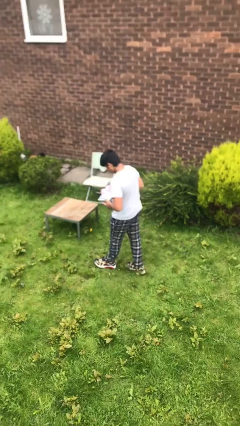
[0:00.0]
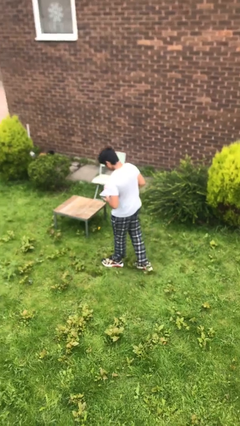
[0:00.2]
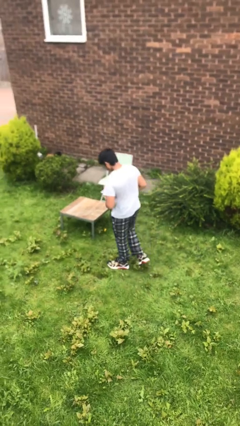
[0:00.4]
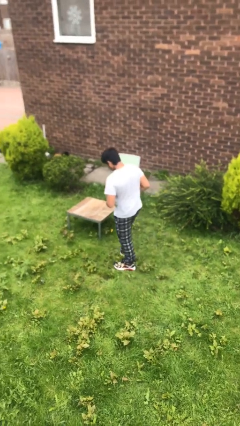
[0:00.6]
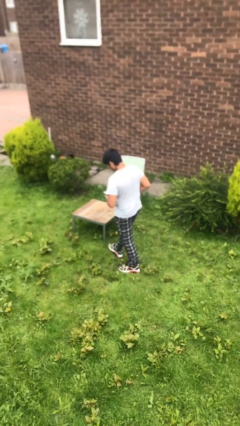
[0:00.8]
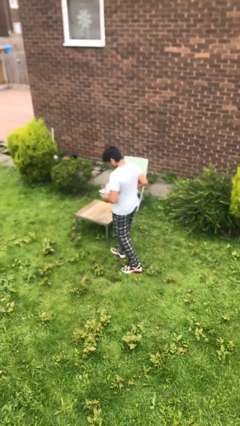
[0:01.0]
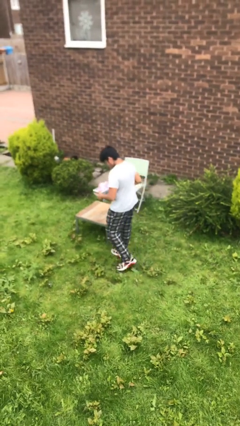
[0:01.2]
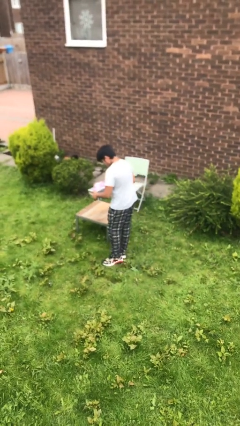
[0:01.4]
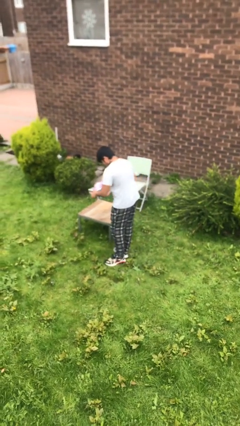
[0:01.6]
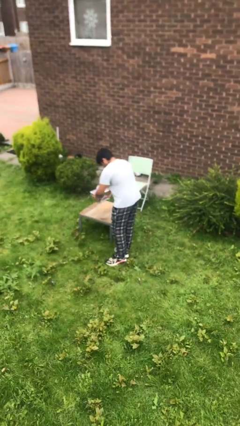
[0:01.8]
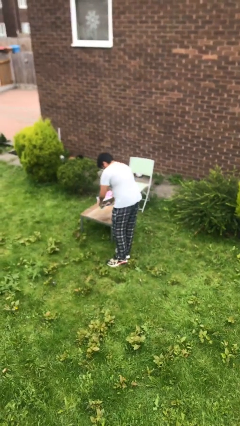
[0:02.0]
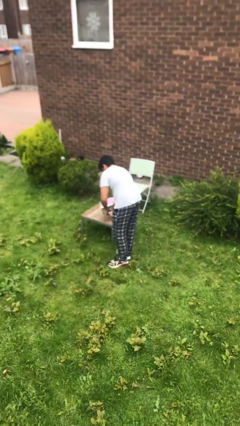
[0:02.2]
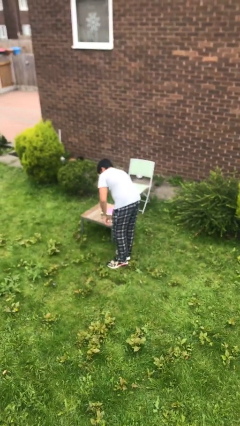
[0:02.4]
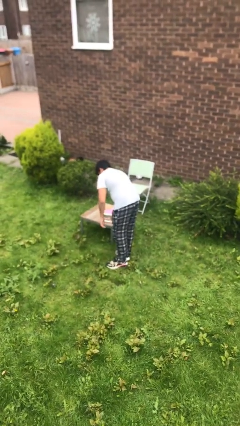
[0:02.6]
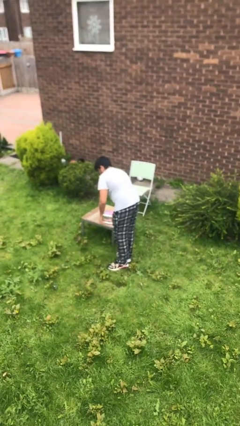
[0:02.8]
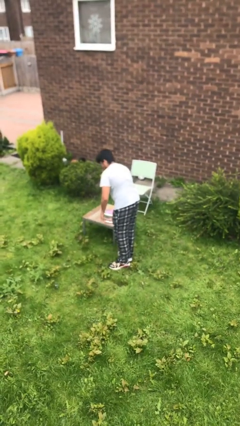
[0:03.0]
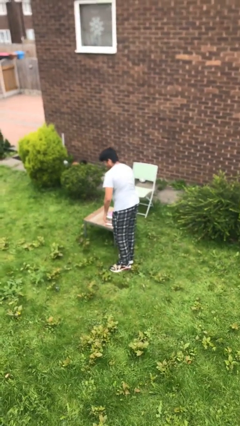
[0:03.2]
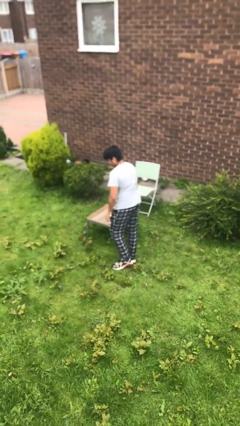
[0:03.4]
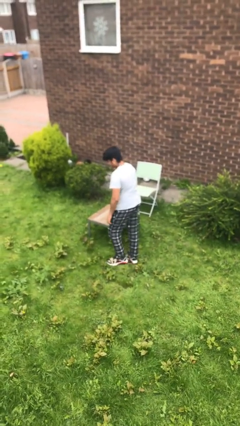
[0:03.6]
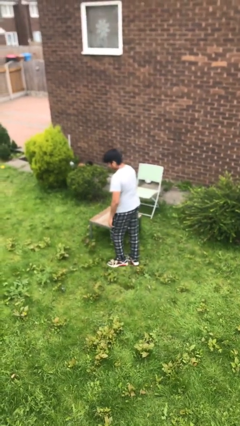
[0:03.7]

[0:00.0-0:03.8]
person puts down object on table

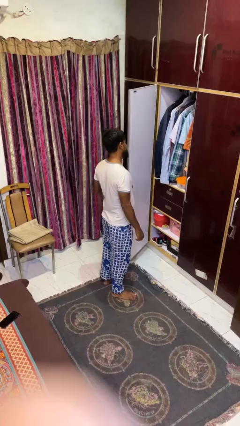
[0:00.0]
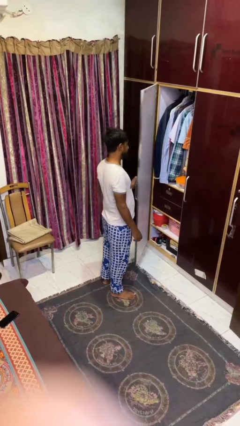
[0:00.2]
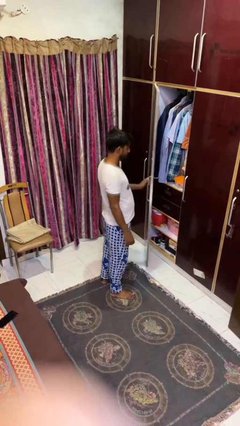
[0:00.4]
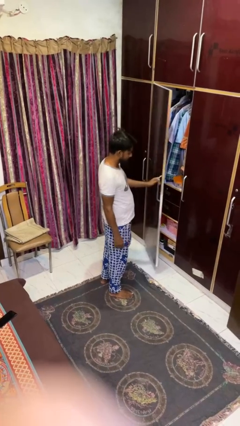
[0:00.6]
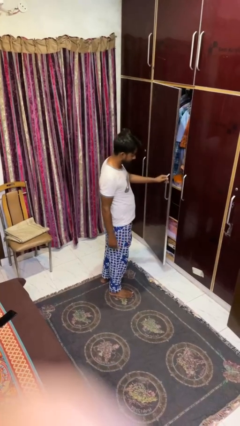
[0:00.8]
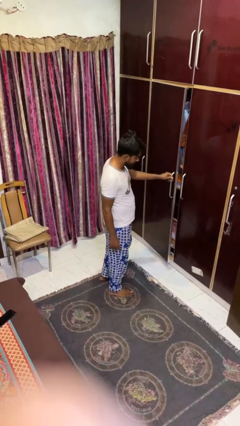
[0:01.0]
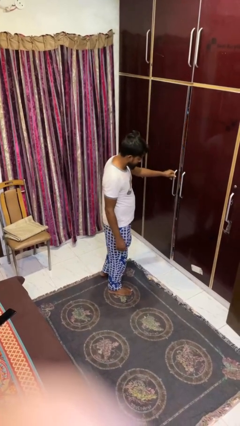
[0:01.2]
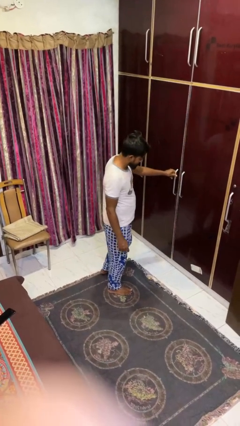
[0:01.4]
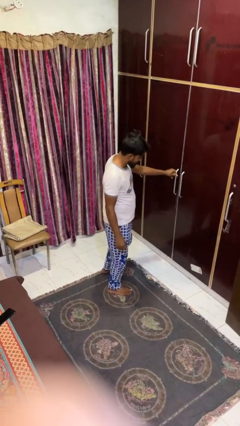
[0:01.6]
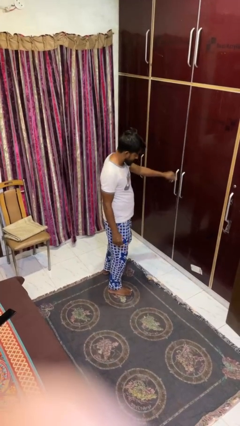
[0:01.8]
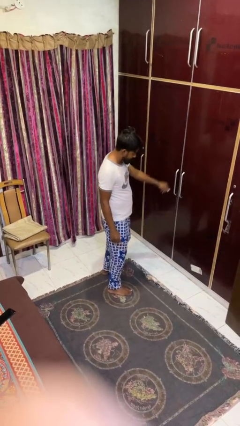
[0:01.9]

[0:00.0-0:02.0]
person closes closet door

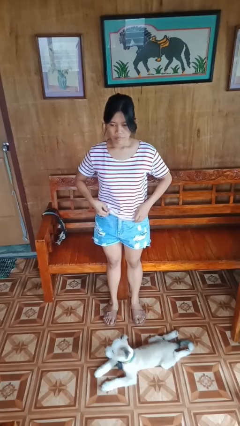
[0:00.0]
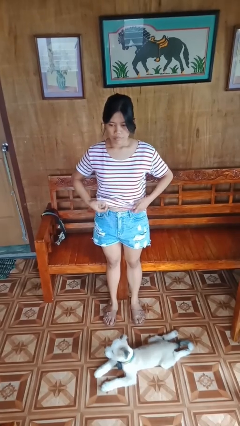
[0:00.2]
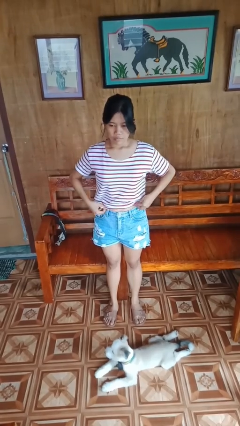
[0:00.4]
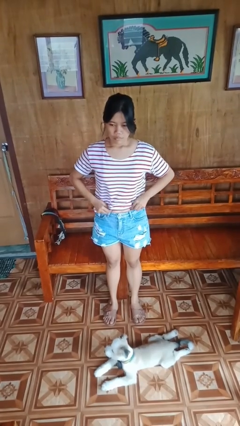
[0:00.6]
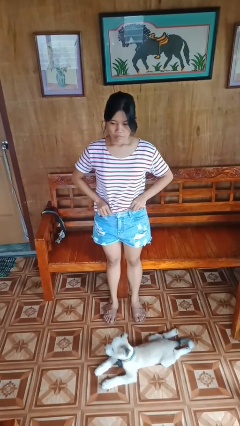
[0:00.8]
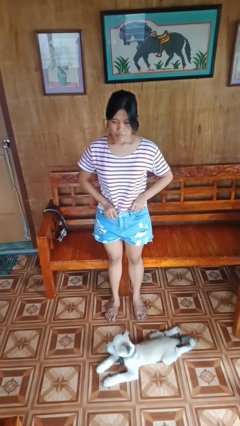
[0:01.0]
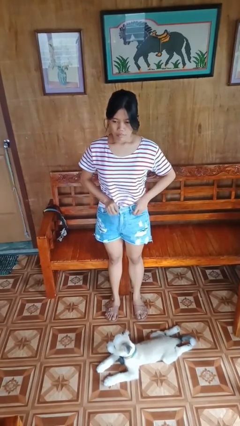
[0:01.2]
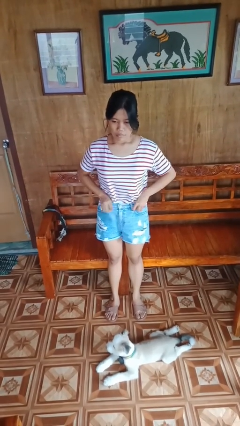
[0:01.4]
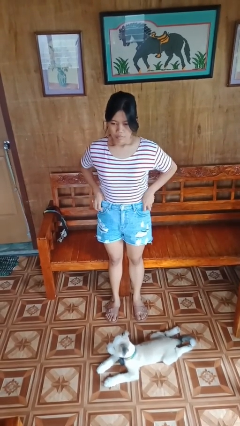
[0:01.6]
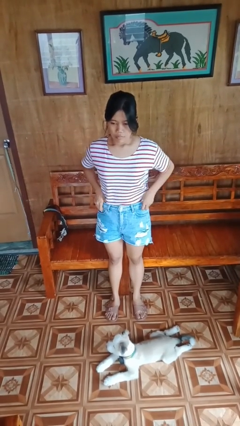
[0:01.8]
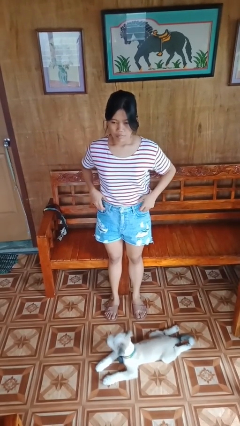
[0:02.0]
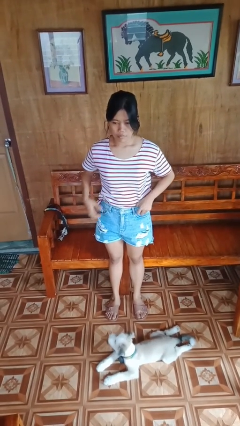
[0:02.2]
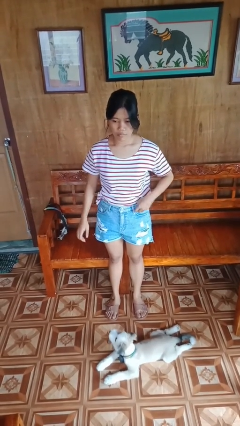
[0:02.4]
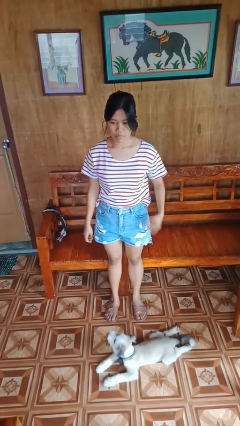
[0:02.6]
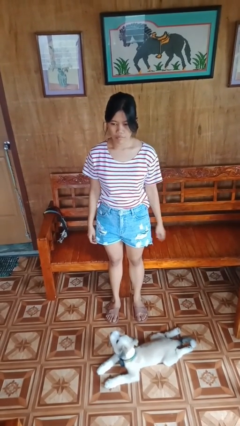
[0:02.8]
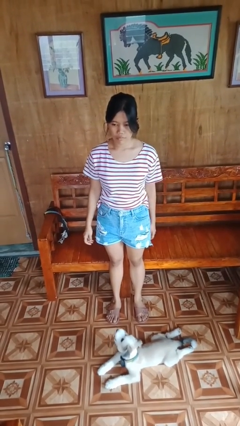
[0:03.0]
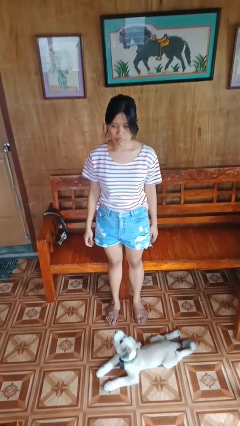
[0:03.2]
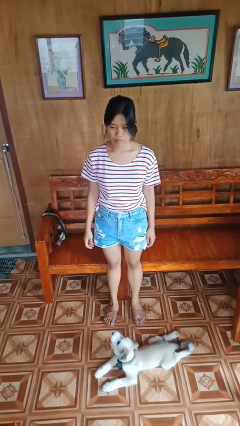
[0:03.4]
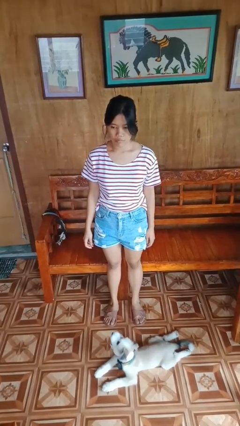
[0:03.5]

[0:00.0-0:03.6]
person tucks in shirt

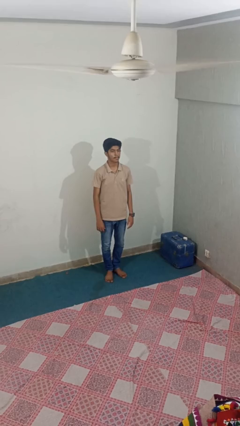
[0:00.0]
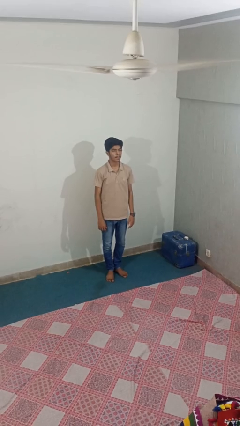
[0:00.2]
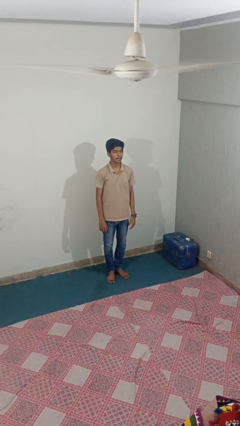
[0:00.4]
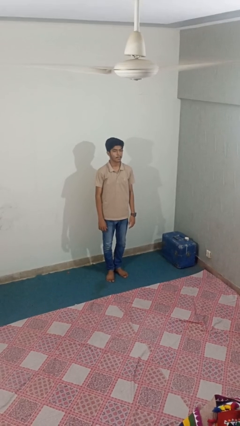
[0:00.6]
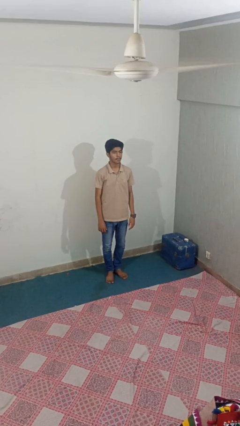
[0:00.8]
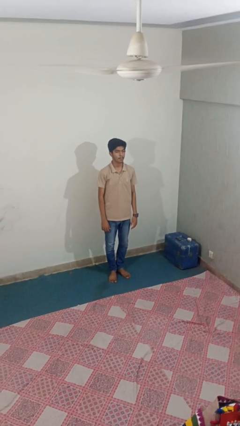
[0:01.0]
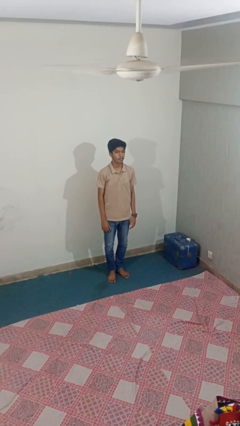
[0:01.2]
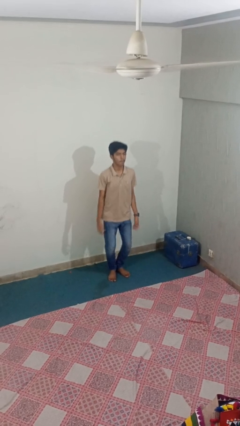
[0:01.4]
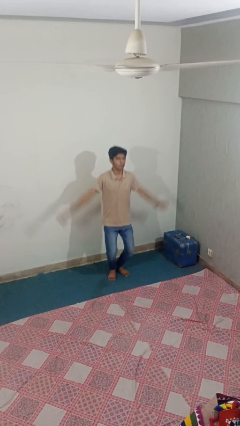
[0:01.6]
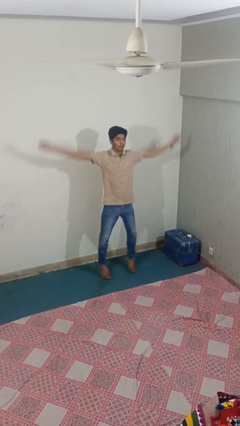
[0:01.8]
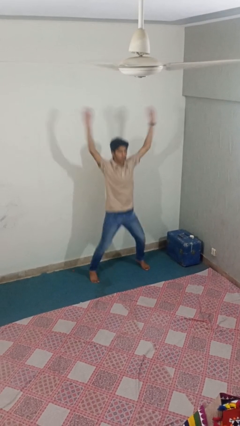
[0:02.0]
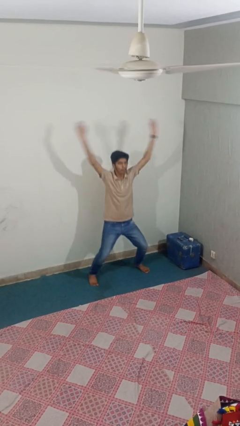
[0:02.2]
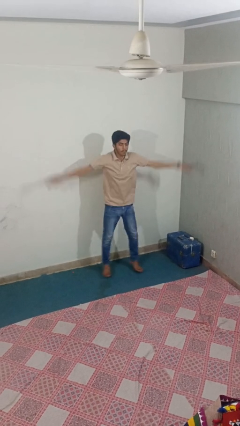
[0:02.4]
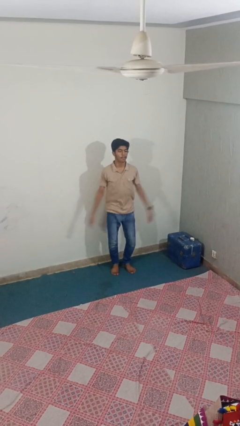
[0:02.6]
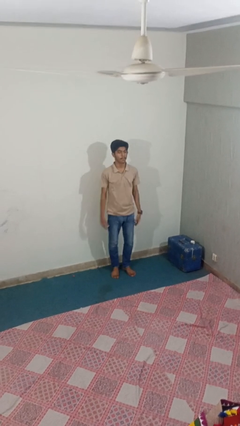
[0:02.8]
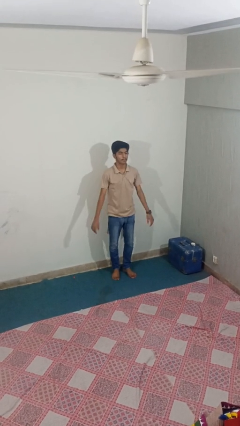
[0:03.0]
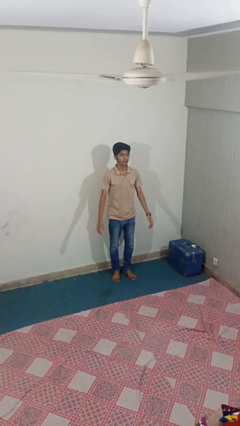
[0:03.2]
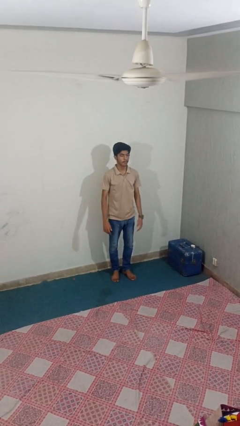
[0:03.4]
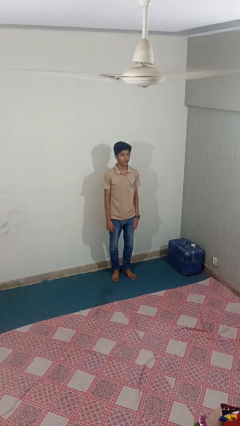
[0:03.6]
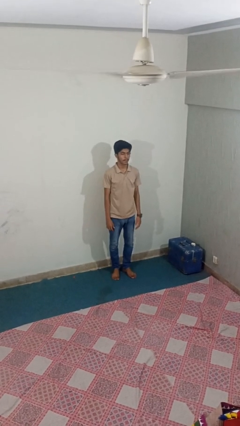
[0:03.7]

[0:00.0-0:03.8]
person exercises with jumping jacks

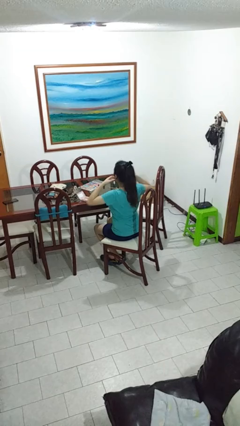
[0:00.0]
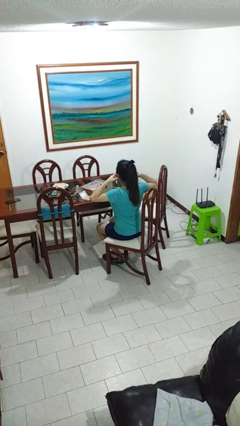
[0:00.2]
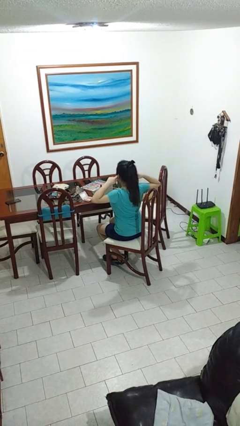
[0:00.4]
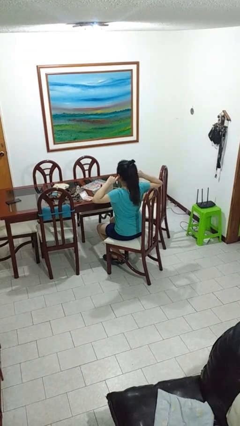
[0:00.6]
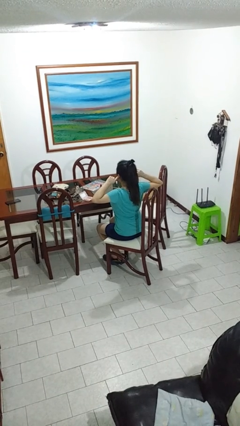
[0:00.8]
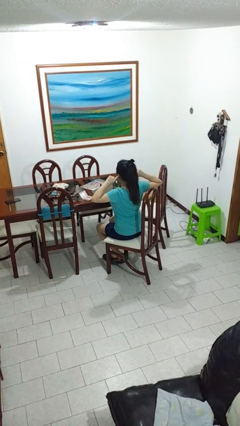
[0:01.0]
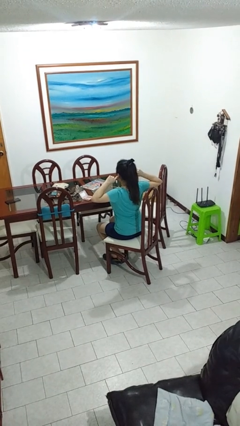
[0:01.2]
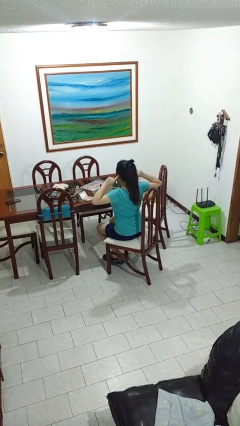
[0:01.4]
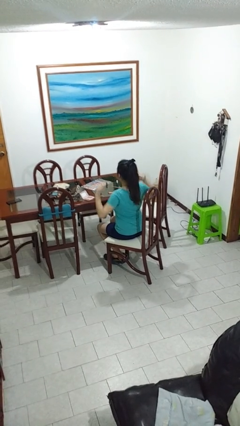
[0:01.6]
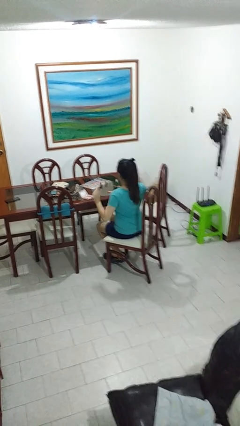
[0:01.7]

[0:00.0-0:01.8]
person puts fingers in ear

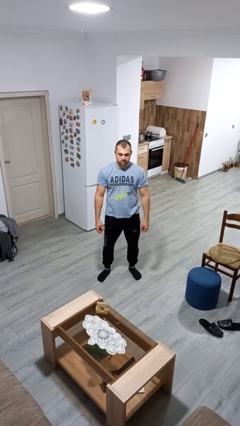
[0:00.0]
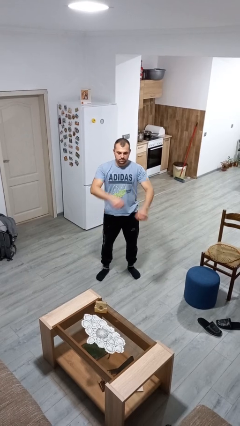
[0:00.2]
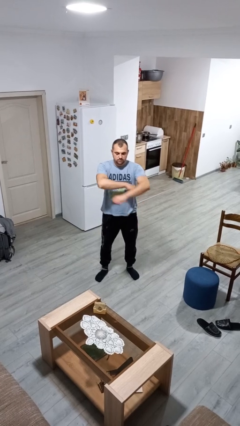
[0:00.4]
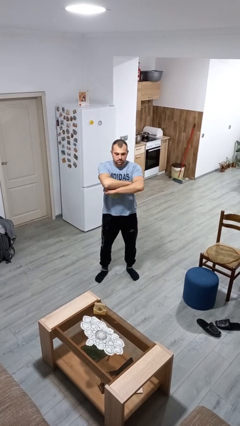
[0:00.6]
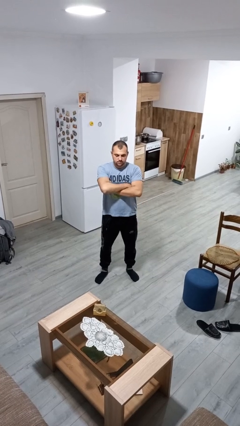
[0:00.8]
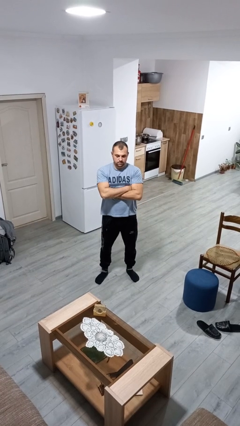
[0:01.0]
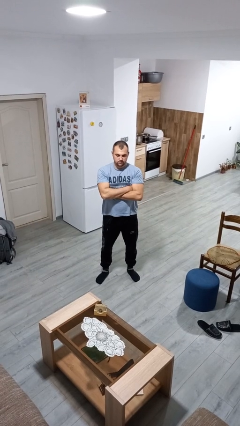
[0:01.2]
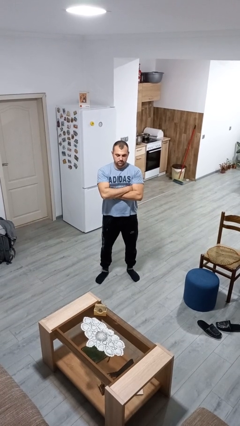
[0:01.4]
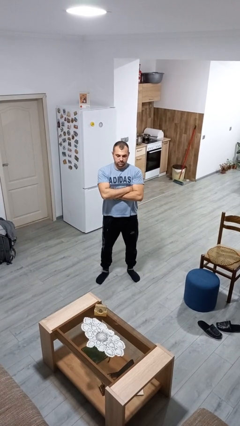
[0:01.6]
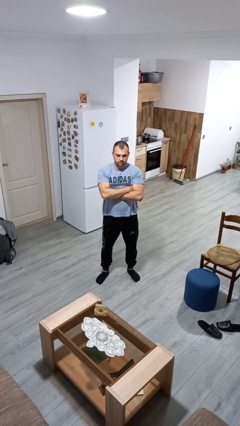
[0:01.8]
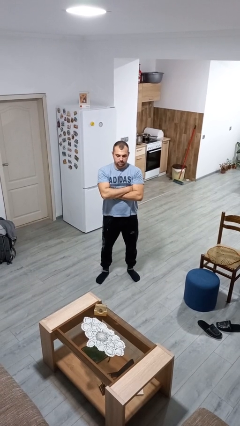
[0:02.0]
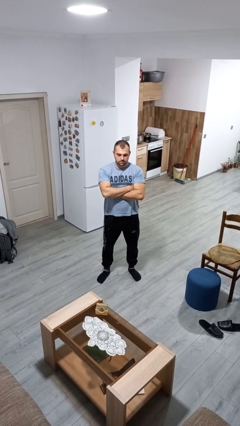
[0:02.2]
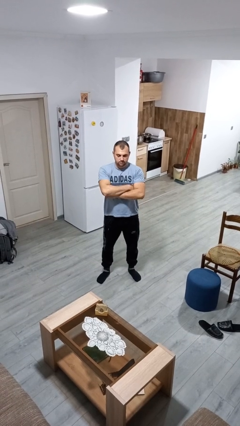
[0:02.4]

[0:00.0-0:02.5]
person crosses arms

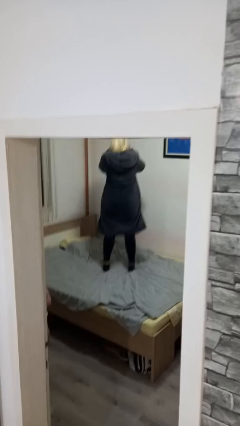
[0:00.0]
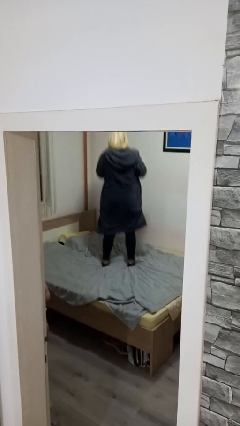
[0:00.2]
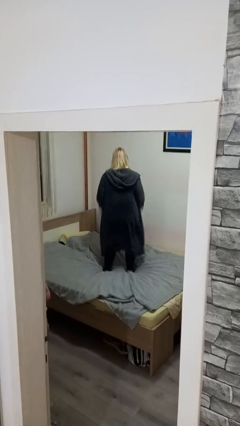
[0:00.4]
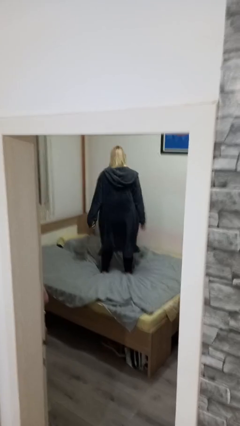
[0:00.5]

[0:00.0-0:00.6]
person jumps on bed
